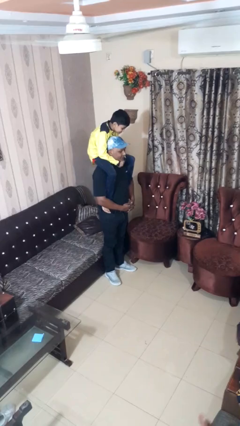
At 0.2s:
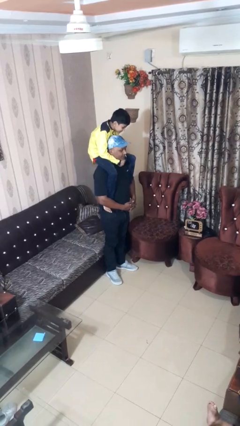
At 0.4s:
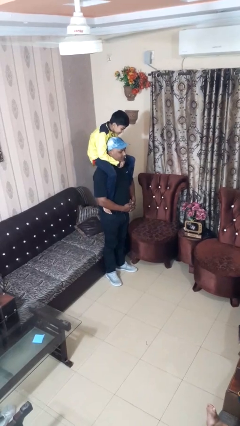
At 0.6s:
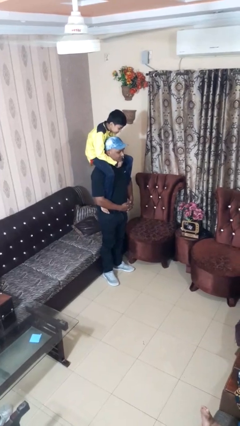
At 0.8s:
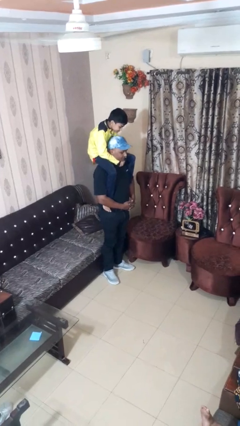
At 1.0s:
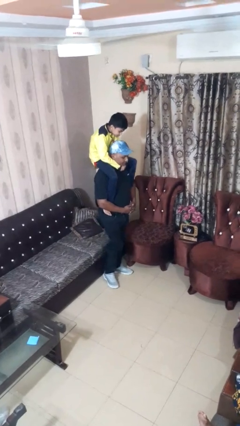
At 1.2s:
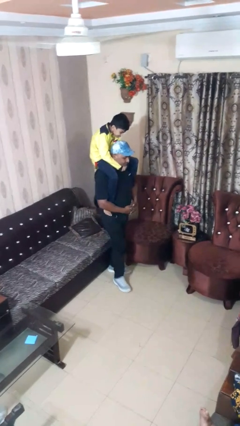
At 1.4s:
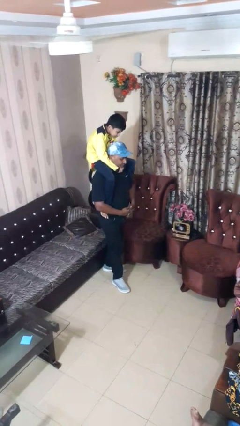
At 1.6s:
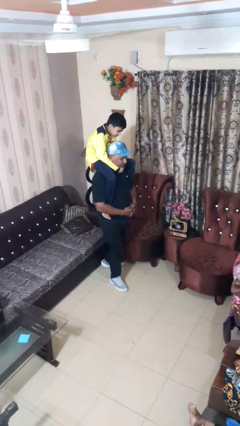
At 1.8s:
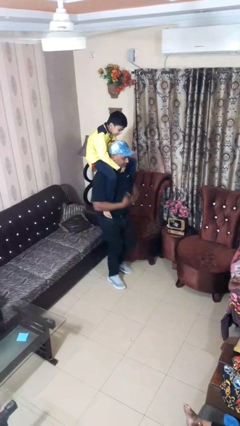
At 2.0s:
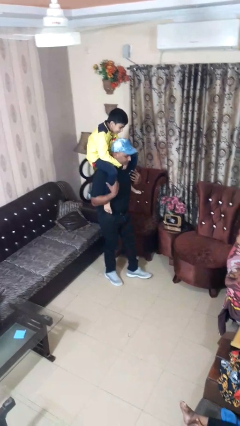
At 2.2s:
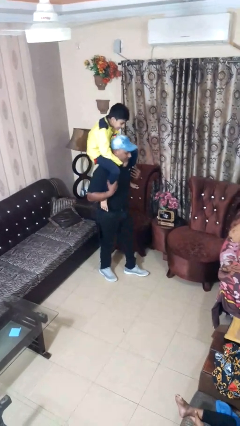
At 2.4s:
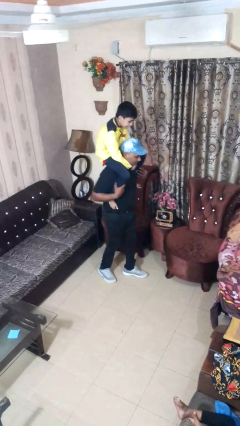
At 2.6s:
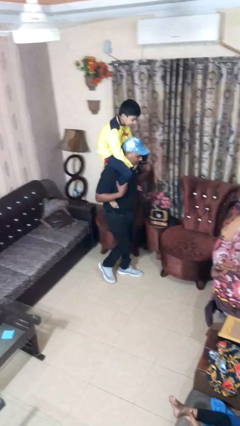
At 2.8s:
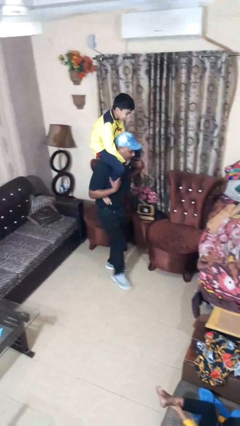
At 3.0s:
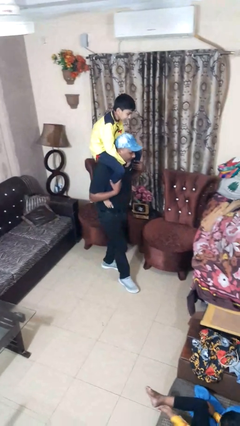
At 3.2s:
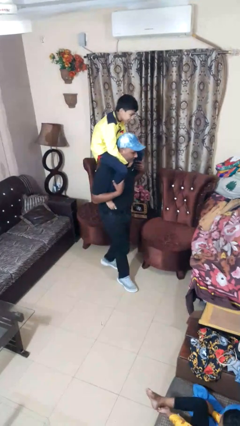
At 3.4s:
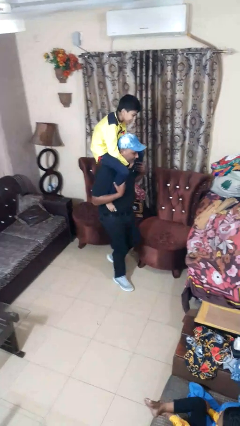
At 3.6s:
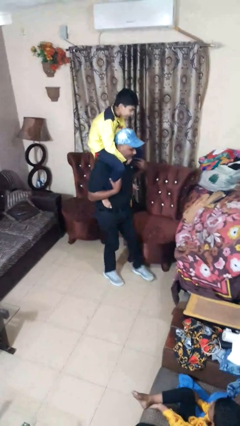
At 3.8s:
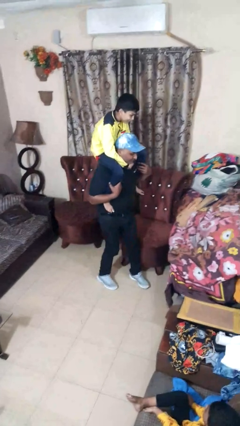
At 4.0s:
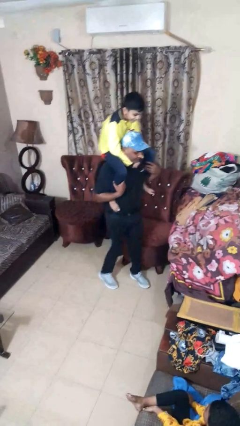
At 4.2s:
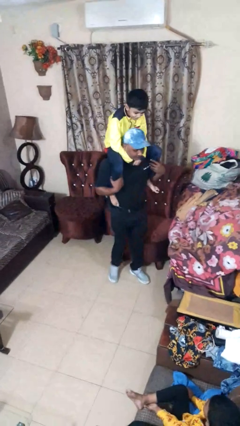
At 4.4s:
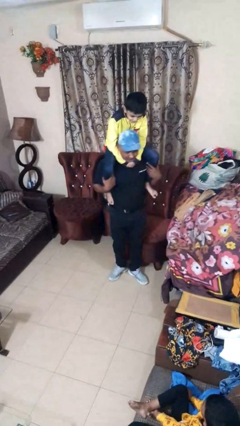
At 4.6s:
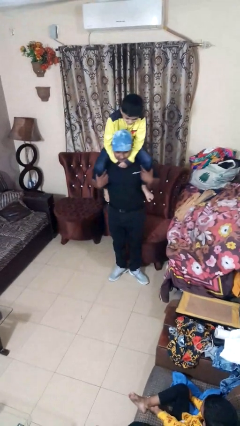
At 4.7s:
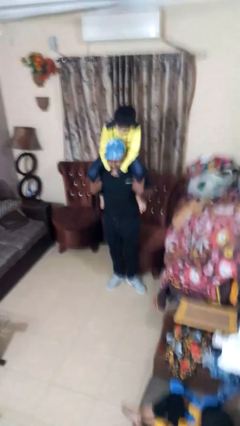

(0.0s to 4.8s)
person carries person on shoulders

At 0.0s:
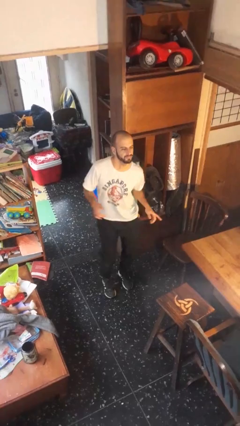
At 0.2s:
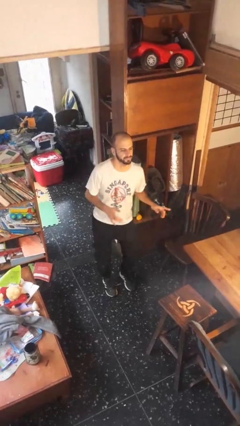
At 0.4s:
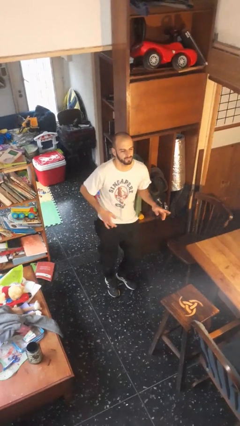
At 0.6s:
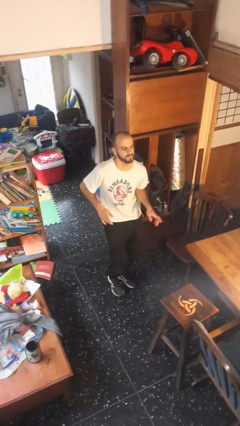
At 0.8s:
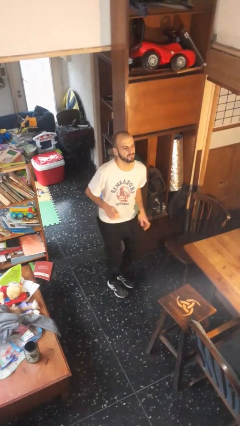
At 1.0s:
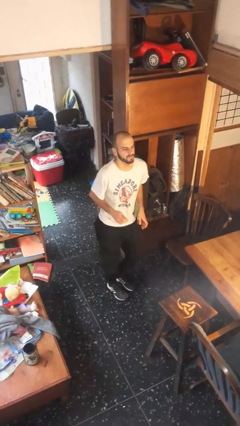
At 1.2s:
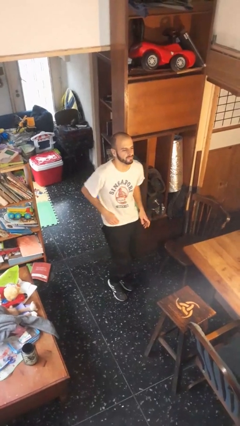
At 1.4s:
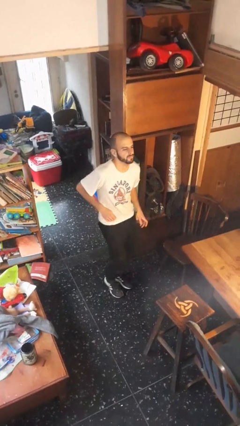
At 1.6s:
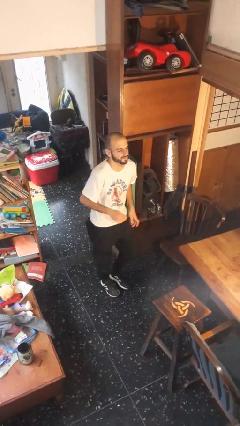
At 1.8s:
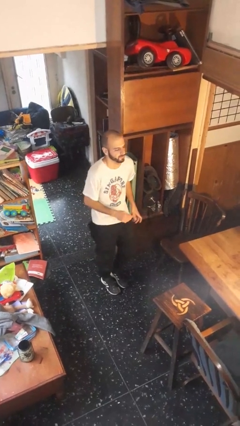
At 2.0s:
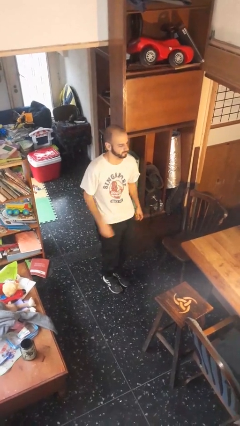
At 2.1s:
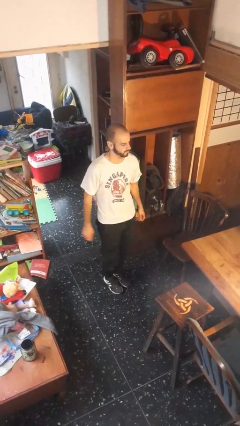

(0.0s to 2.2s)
person dances in place

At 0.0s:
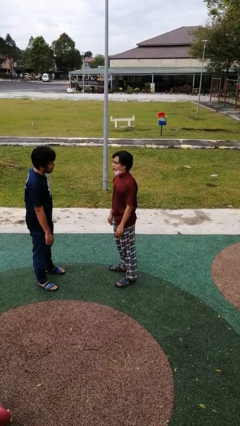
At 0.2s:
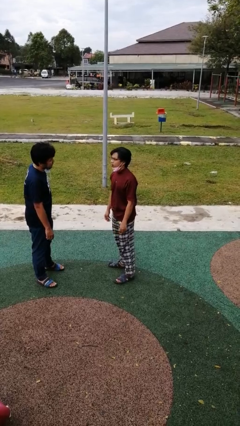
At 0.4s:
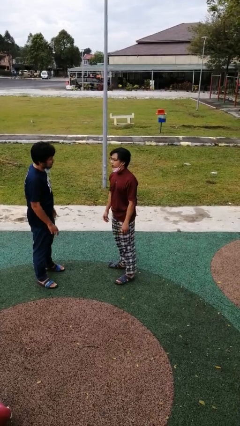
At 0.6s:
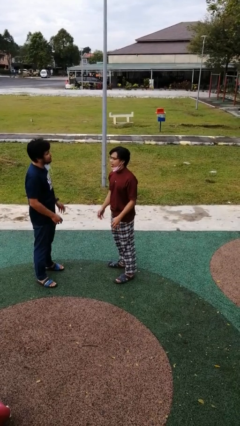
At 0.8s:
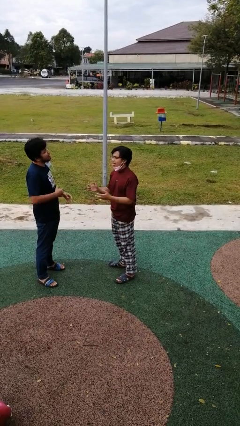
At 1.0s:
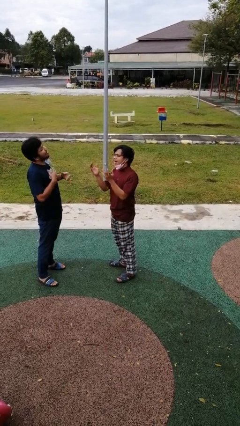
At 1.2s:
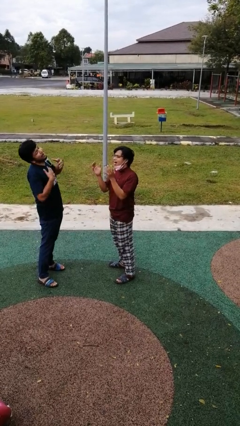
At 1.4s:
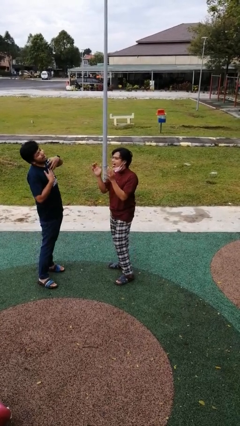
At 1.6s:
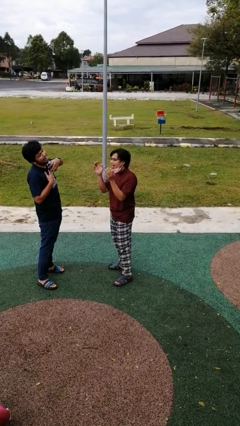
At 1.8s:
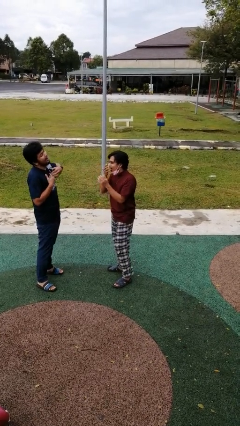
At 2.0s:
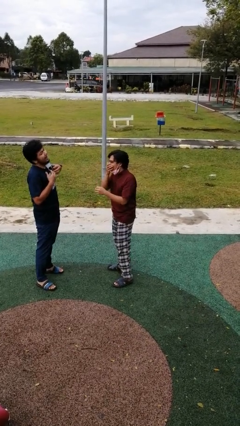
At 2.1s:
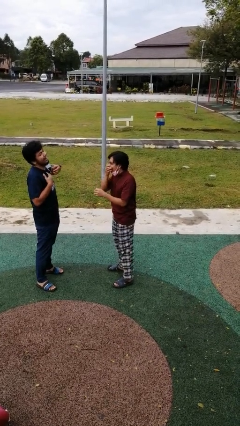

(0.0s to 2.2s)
person laughs with person

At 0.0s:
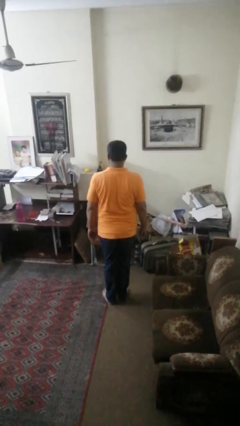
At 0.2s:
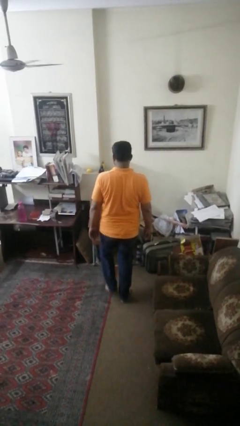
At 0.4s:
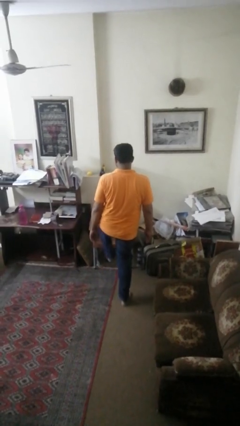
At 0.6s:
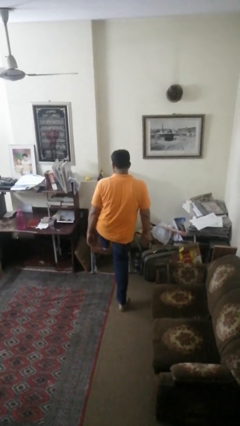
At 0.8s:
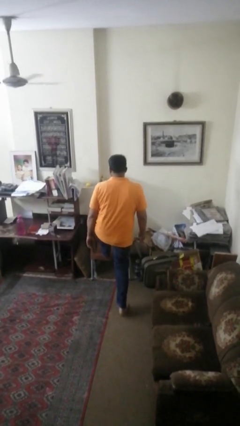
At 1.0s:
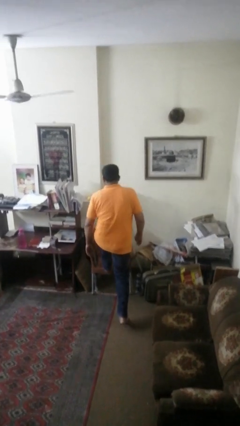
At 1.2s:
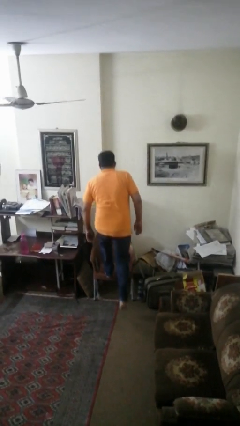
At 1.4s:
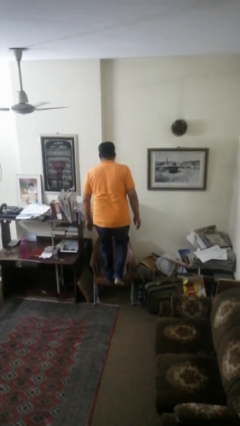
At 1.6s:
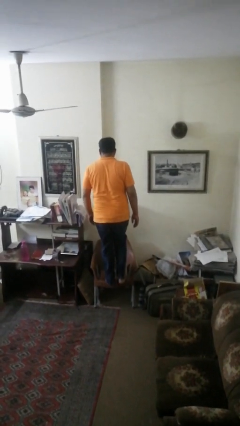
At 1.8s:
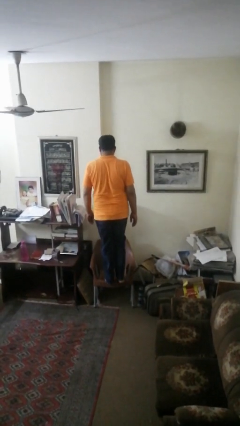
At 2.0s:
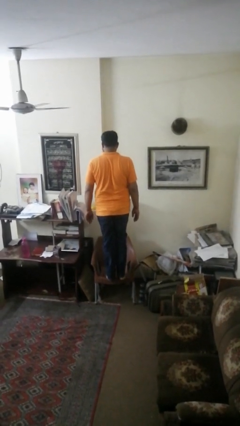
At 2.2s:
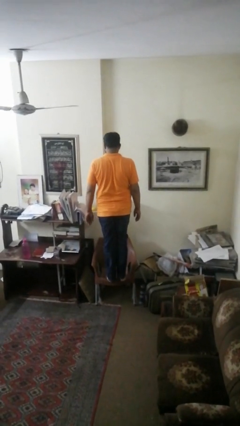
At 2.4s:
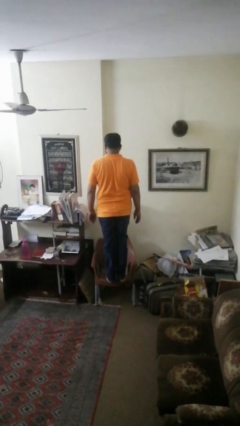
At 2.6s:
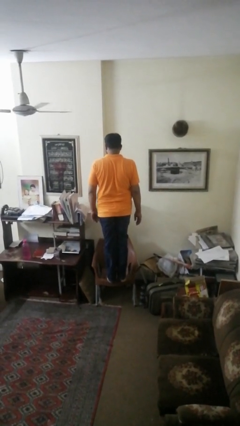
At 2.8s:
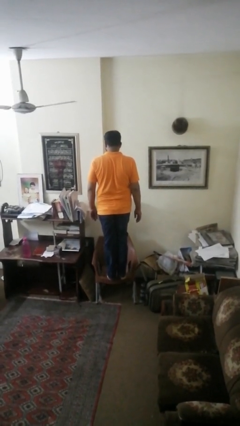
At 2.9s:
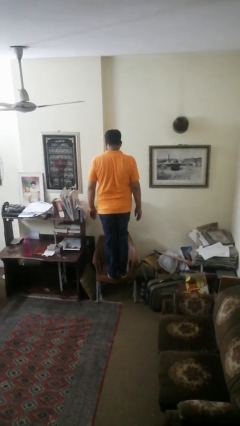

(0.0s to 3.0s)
person climbs on chair

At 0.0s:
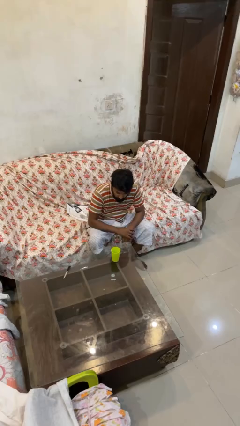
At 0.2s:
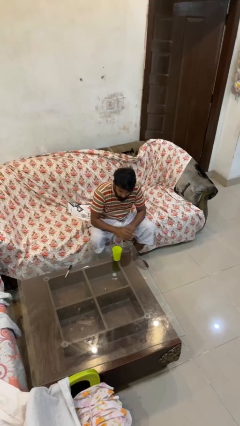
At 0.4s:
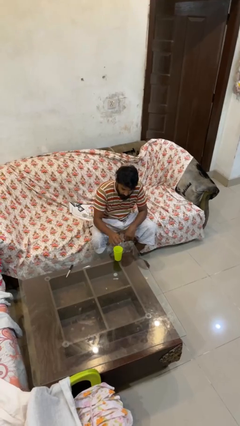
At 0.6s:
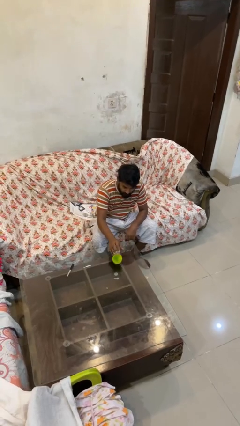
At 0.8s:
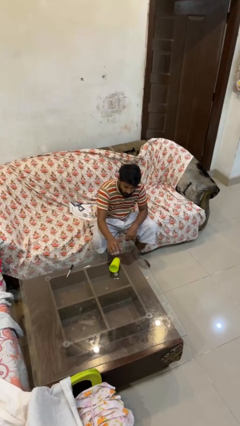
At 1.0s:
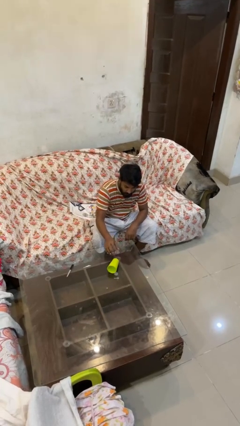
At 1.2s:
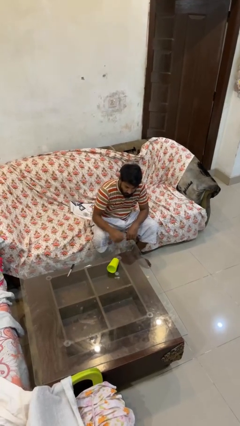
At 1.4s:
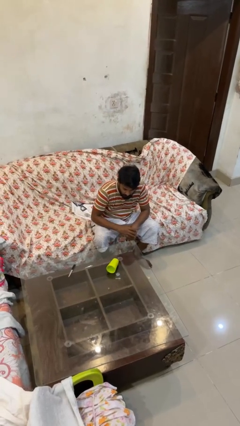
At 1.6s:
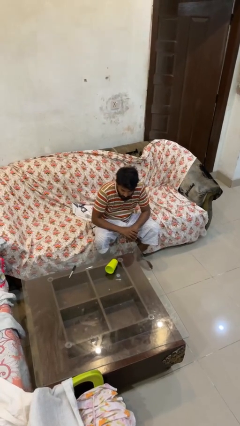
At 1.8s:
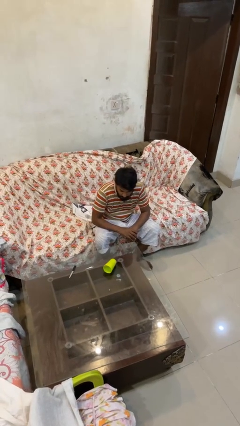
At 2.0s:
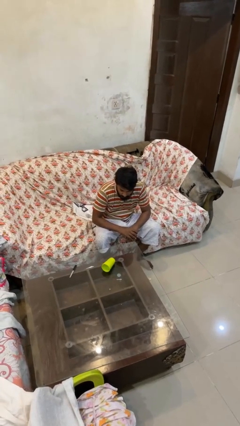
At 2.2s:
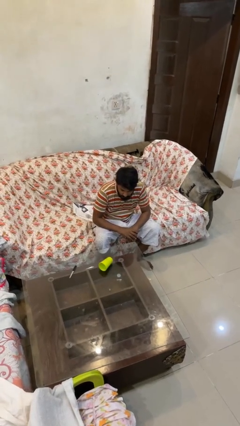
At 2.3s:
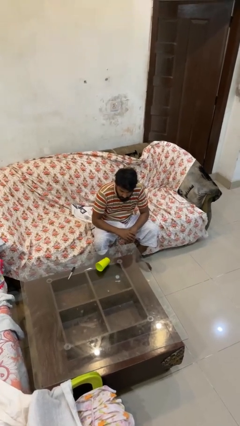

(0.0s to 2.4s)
person knocks over glass

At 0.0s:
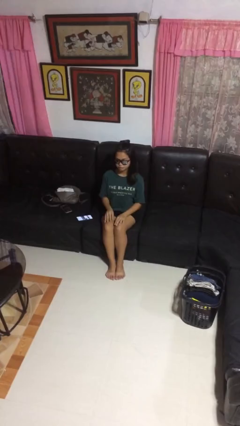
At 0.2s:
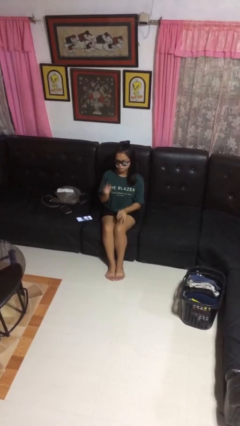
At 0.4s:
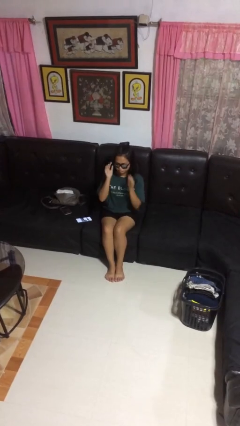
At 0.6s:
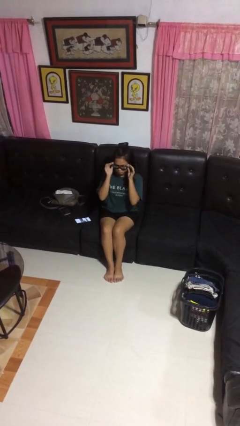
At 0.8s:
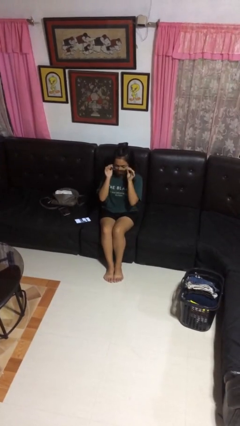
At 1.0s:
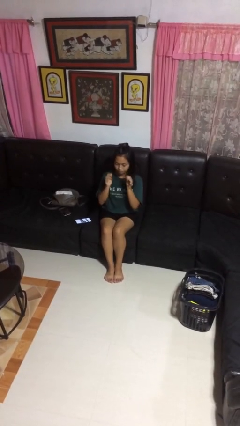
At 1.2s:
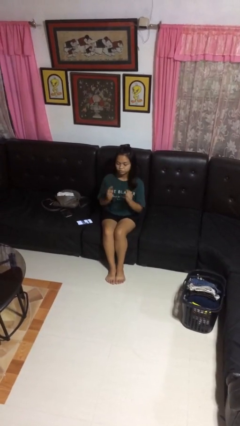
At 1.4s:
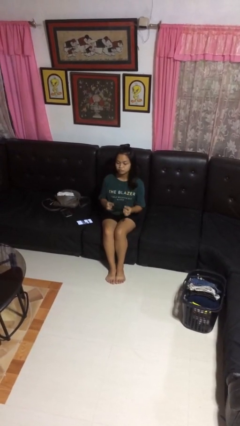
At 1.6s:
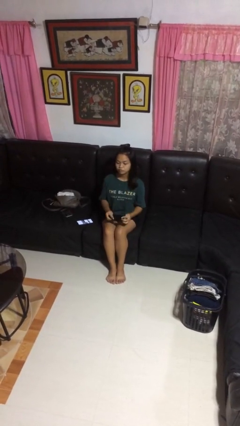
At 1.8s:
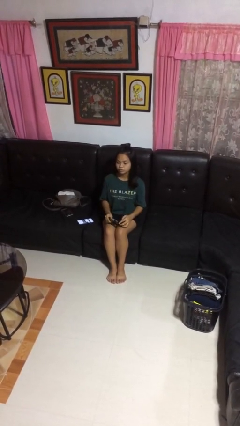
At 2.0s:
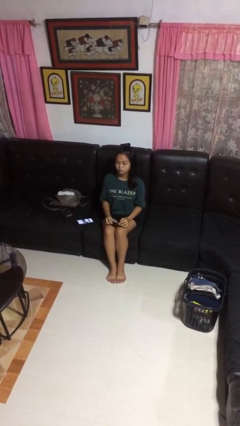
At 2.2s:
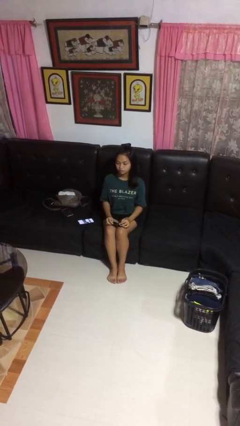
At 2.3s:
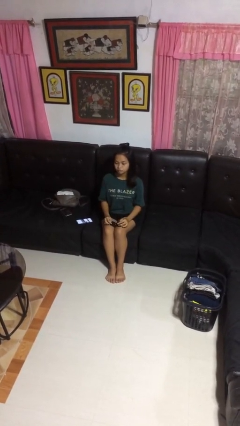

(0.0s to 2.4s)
person takes off sunglasses

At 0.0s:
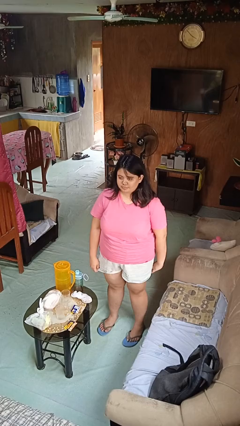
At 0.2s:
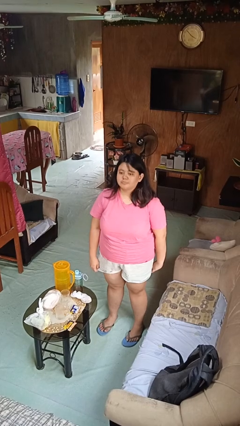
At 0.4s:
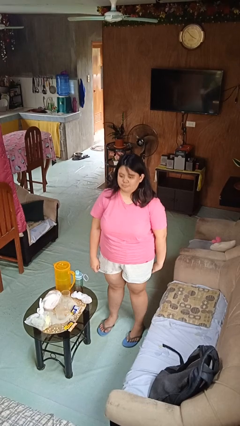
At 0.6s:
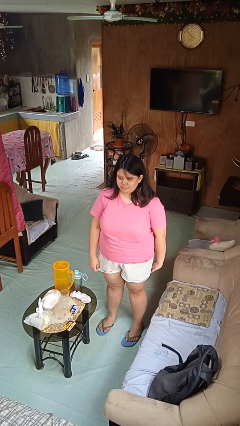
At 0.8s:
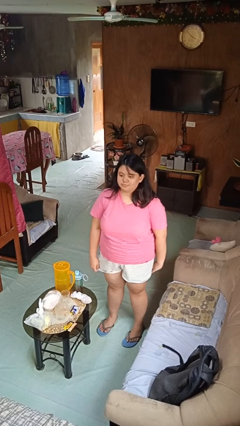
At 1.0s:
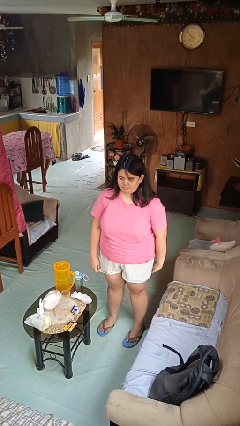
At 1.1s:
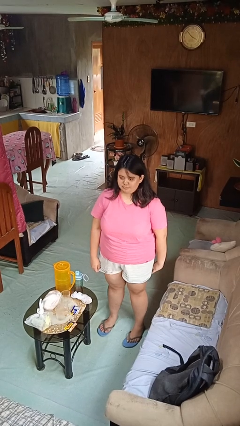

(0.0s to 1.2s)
person nods head
